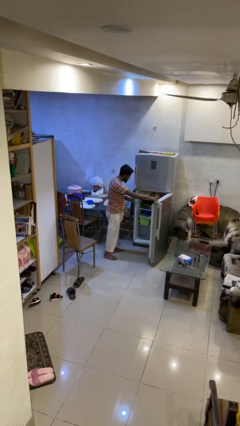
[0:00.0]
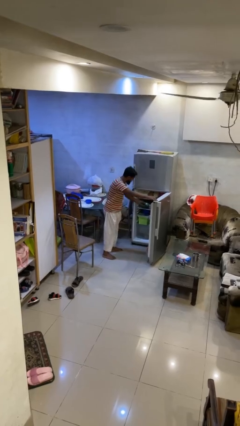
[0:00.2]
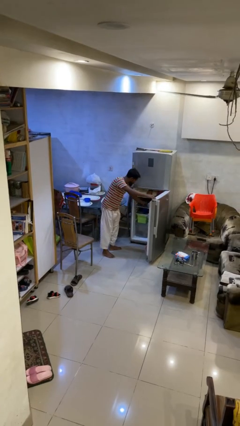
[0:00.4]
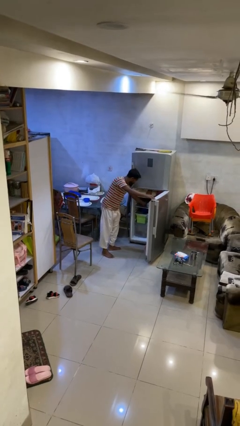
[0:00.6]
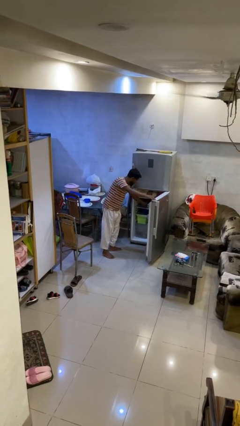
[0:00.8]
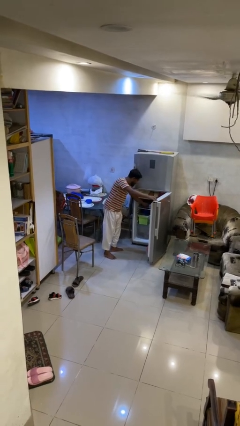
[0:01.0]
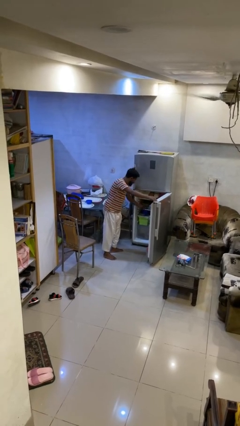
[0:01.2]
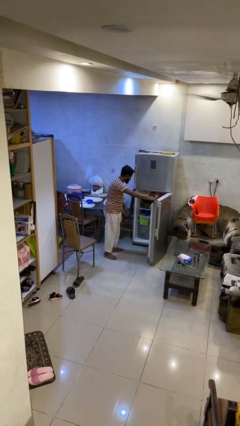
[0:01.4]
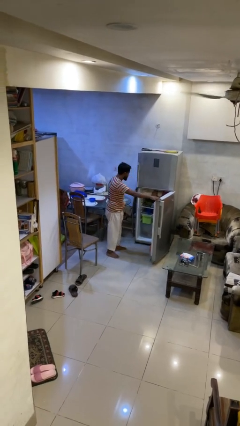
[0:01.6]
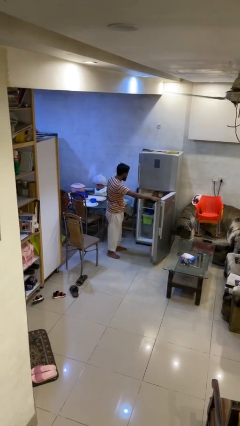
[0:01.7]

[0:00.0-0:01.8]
person puts object into refrigerator

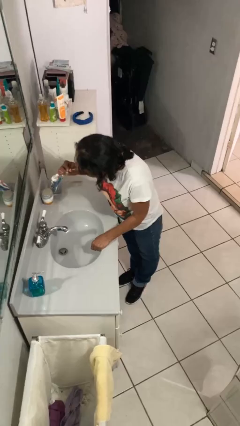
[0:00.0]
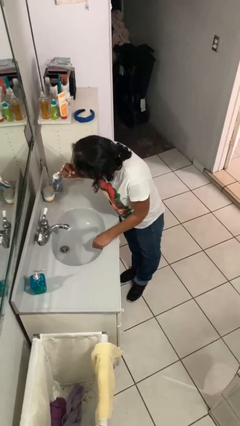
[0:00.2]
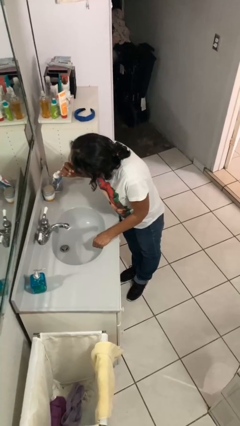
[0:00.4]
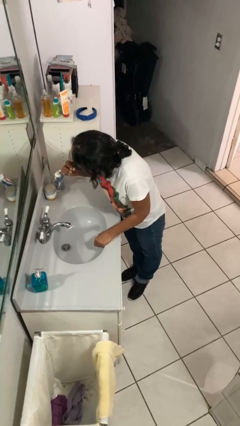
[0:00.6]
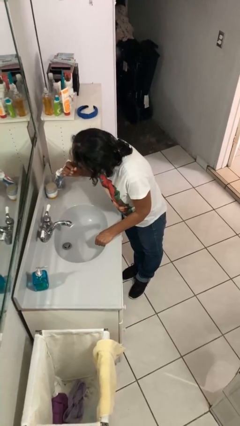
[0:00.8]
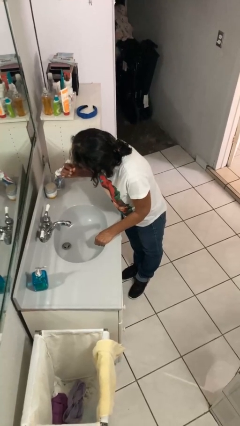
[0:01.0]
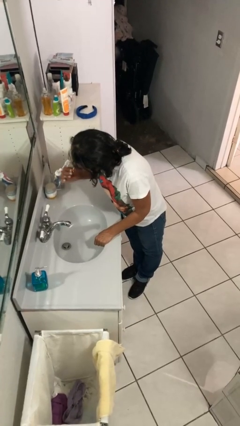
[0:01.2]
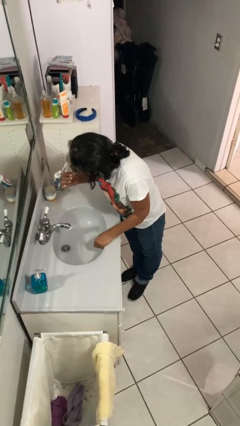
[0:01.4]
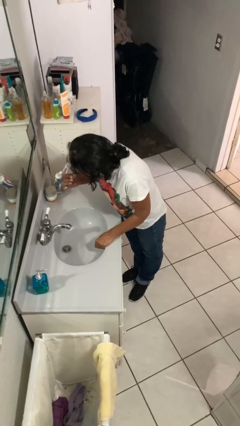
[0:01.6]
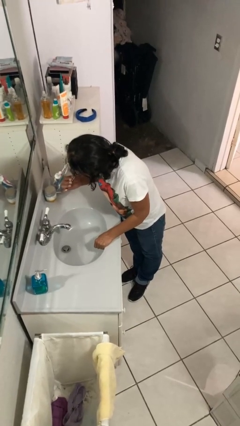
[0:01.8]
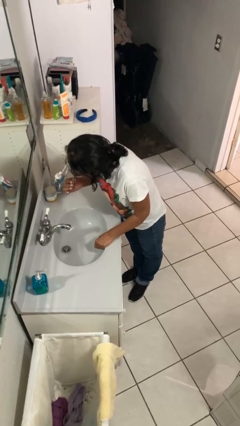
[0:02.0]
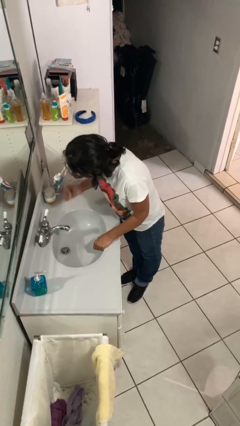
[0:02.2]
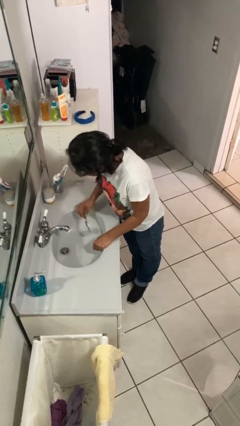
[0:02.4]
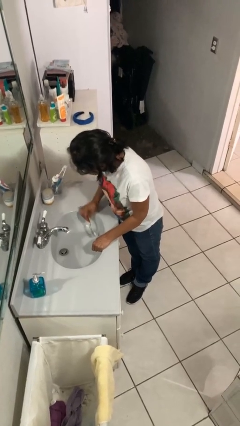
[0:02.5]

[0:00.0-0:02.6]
person brushes teeth

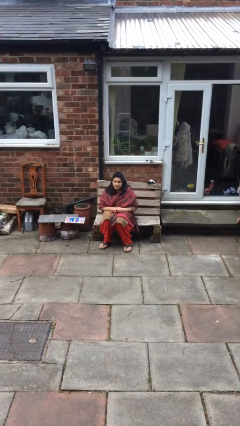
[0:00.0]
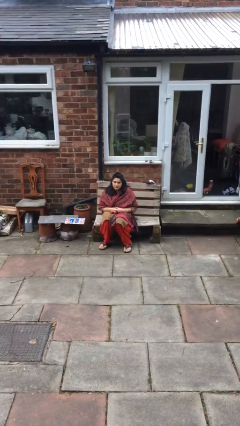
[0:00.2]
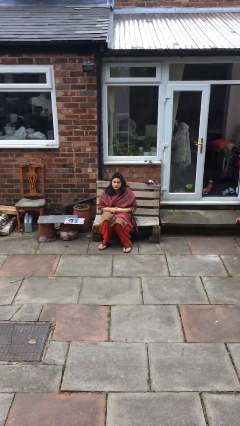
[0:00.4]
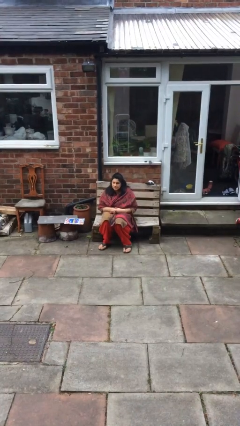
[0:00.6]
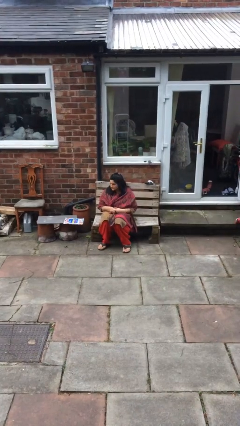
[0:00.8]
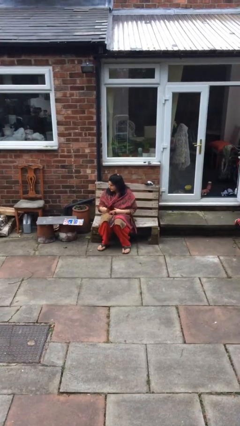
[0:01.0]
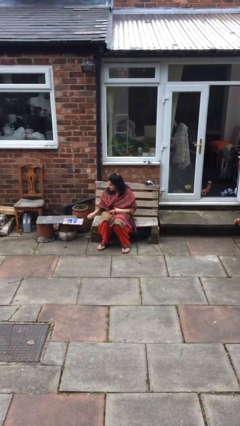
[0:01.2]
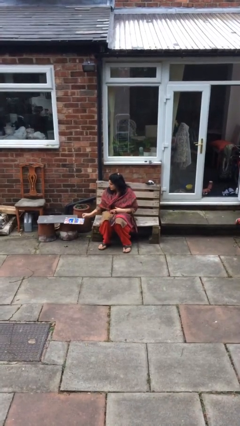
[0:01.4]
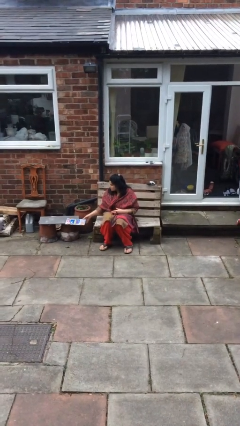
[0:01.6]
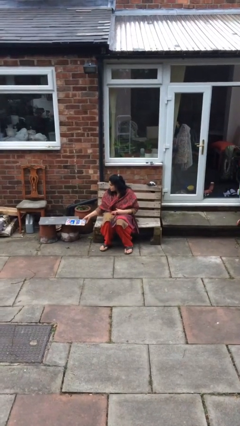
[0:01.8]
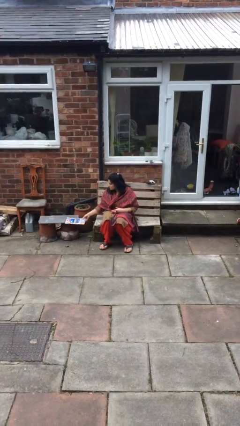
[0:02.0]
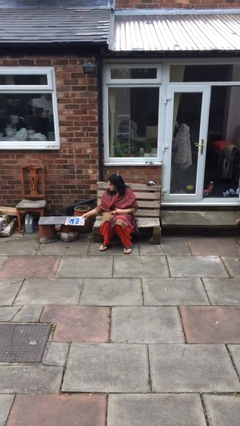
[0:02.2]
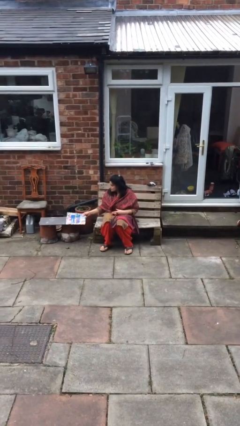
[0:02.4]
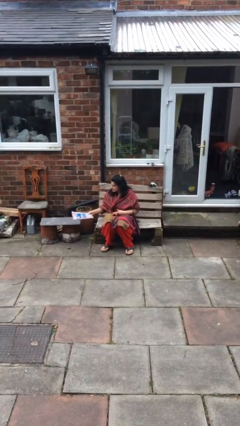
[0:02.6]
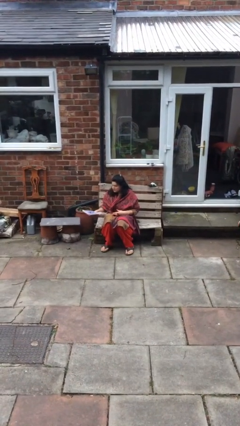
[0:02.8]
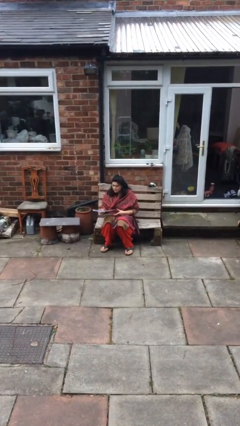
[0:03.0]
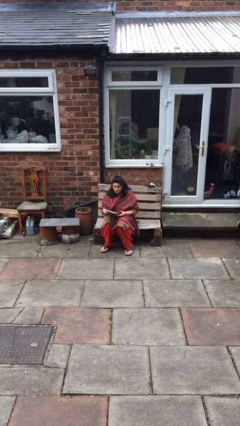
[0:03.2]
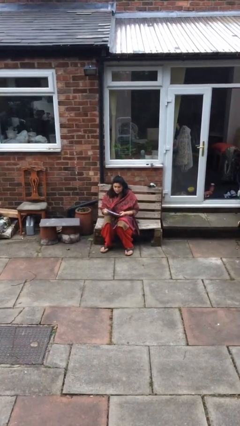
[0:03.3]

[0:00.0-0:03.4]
person picks up object from table

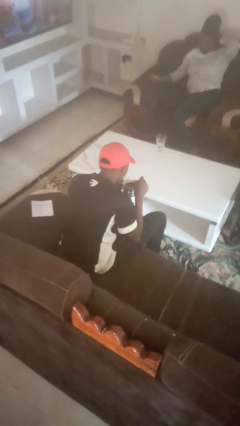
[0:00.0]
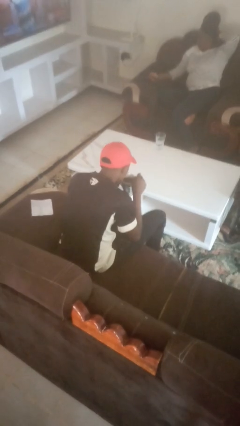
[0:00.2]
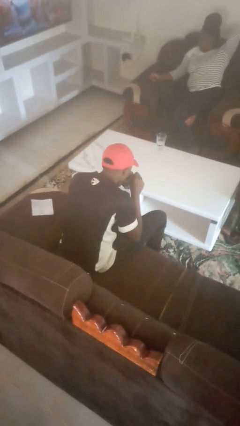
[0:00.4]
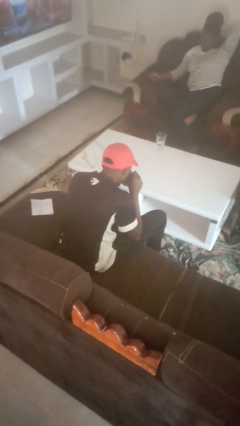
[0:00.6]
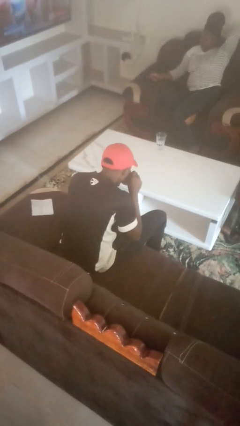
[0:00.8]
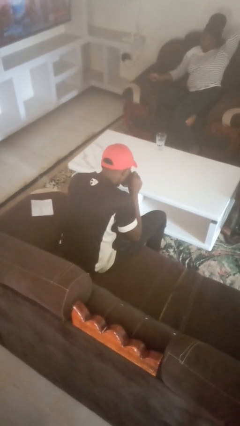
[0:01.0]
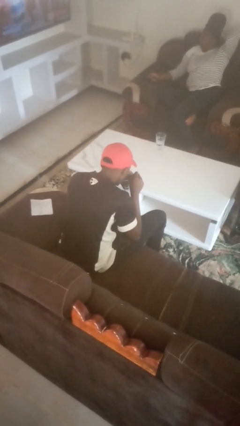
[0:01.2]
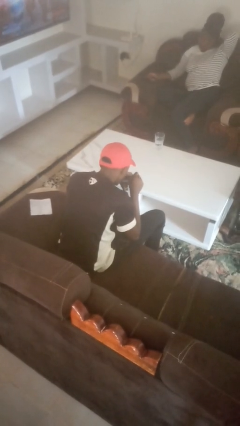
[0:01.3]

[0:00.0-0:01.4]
person drinks from mug

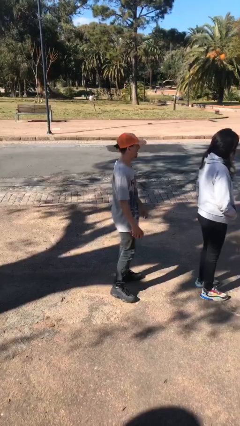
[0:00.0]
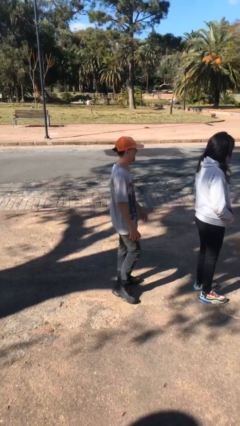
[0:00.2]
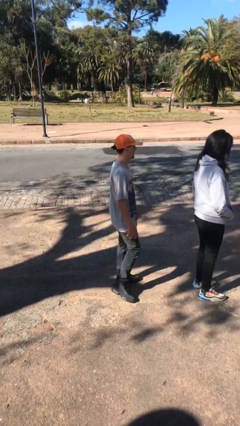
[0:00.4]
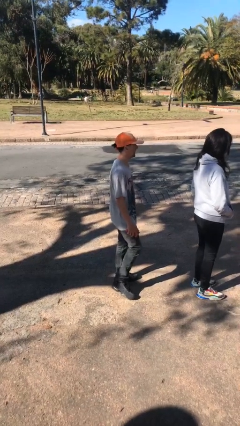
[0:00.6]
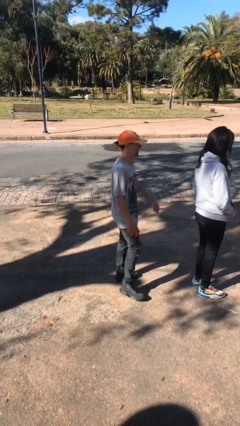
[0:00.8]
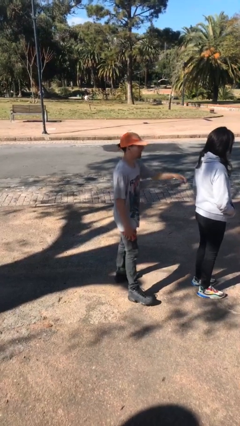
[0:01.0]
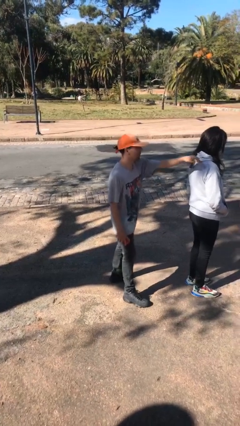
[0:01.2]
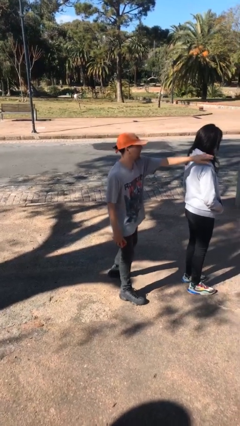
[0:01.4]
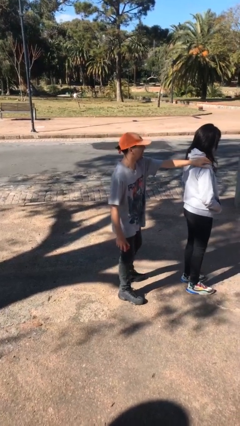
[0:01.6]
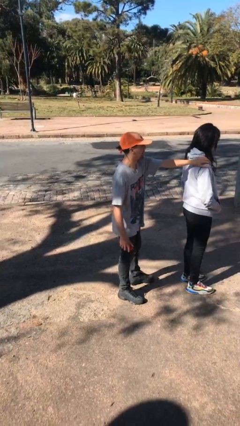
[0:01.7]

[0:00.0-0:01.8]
person grabs person by shoulder

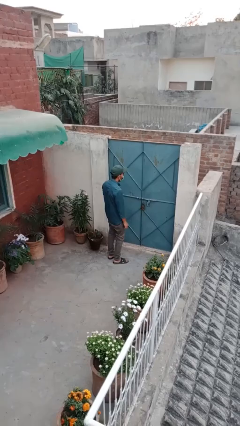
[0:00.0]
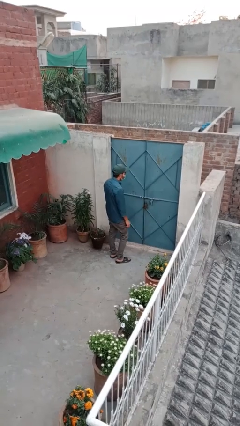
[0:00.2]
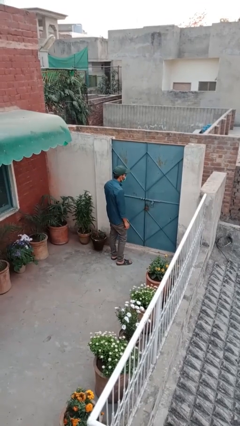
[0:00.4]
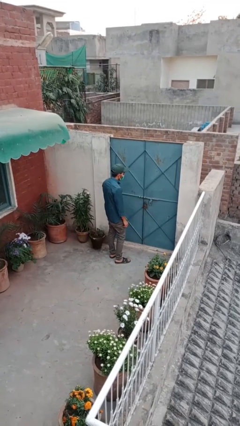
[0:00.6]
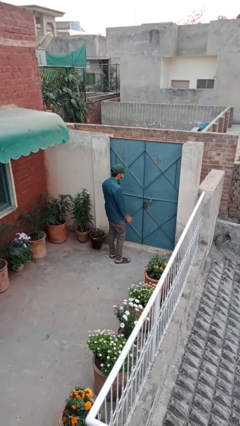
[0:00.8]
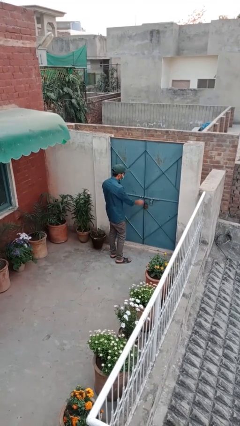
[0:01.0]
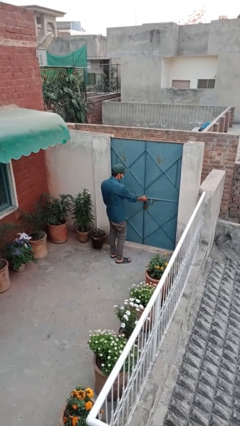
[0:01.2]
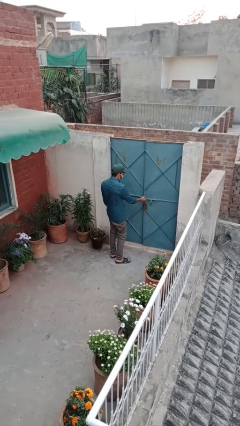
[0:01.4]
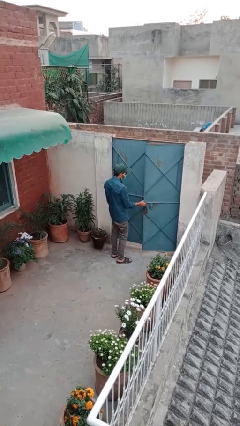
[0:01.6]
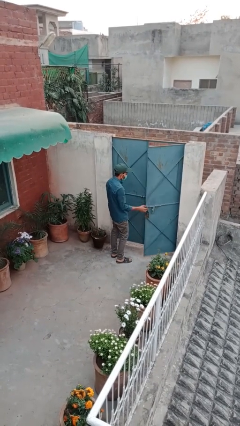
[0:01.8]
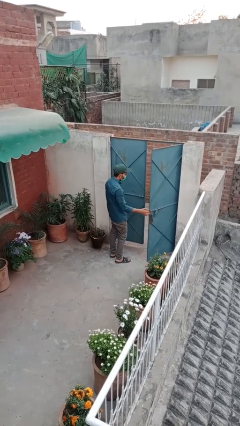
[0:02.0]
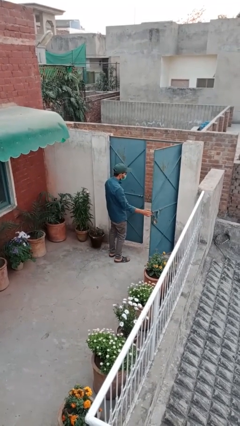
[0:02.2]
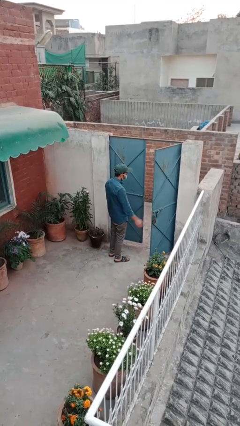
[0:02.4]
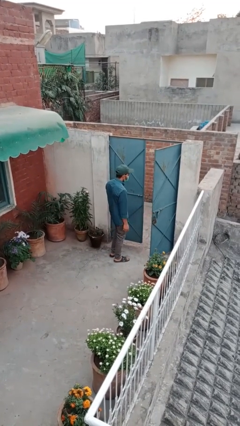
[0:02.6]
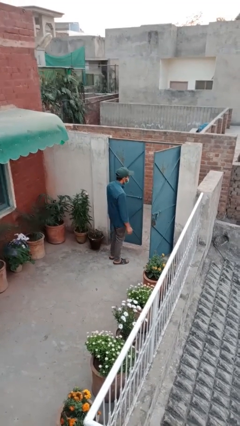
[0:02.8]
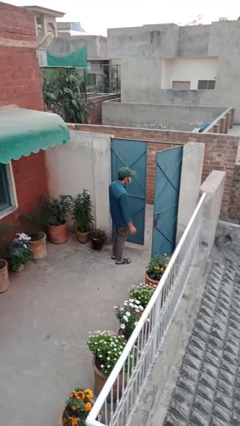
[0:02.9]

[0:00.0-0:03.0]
person opens facility door

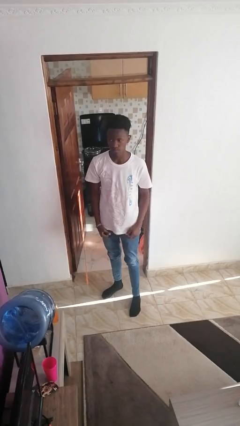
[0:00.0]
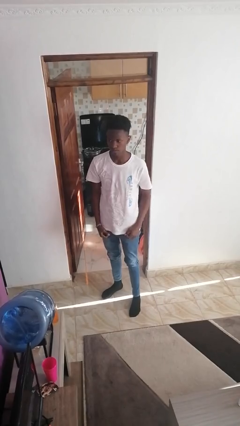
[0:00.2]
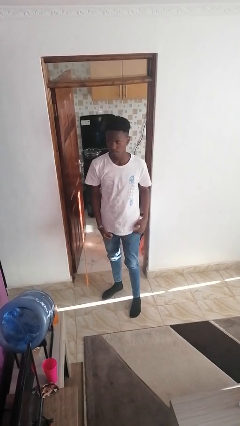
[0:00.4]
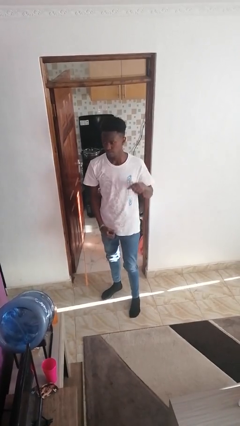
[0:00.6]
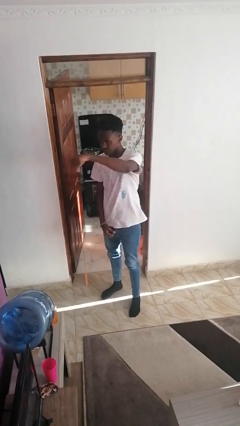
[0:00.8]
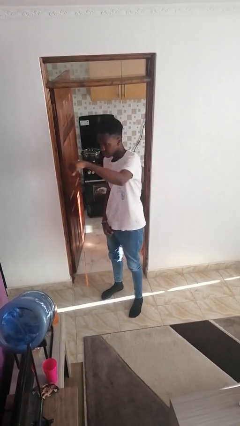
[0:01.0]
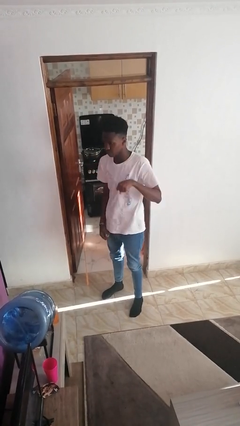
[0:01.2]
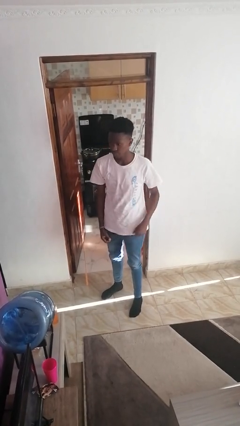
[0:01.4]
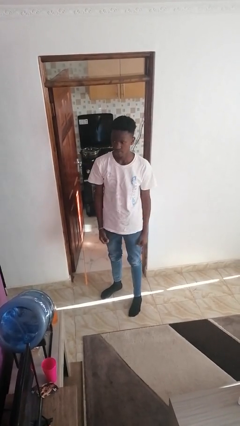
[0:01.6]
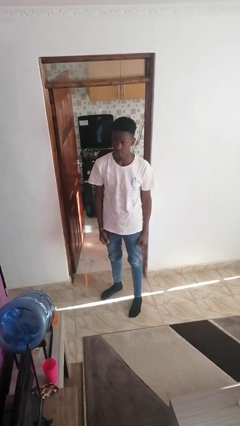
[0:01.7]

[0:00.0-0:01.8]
person punches

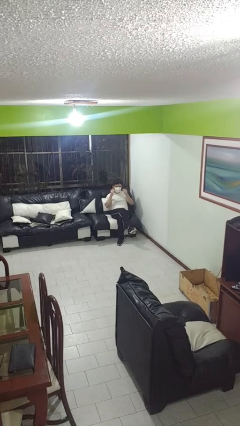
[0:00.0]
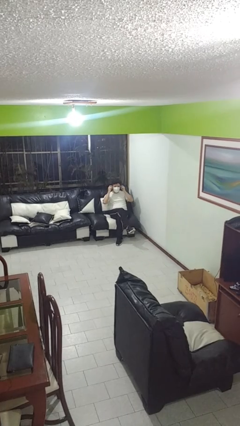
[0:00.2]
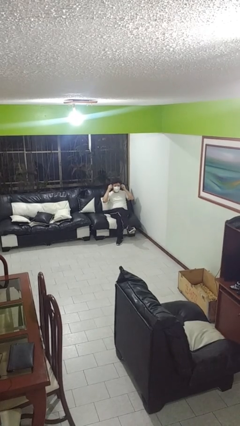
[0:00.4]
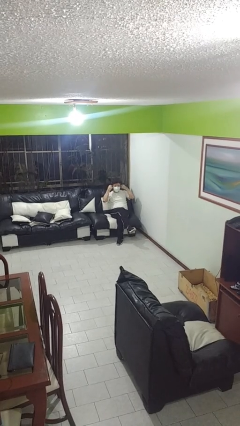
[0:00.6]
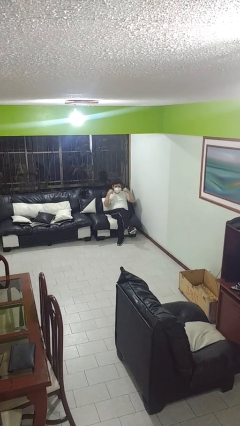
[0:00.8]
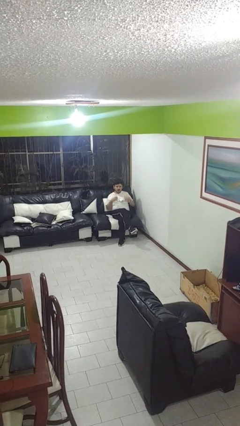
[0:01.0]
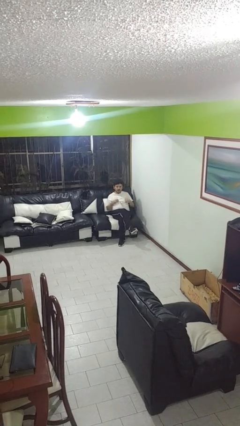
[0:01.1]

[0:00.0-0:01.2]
person takes off facemask
